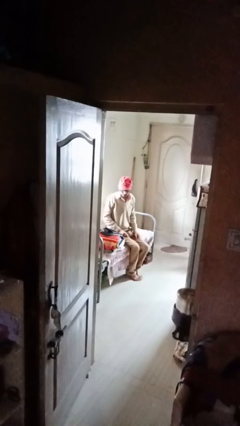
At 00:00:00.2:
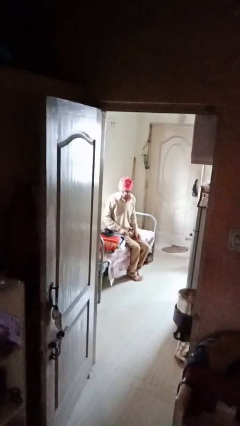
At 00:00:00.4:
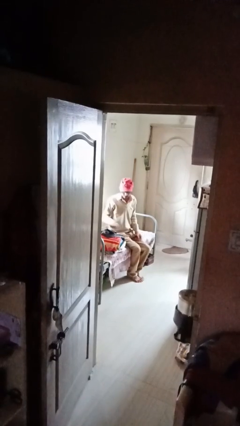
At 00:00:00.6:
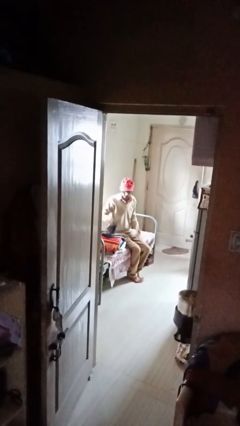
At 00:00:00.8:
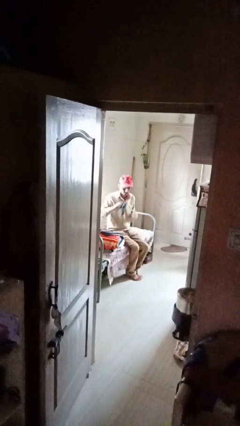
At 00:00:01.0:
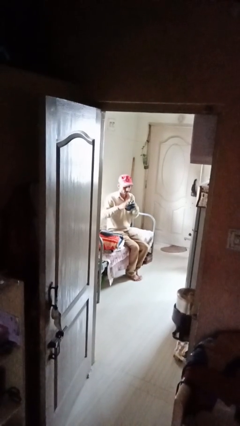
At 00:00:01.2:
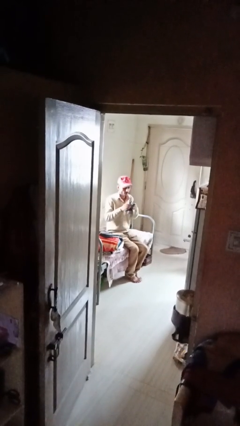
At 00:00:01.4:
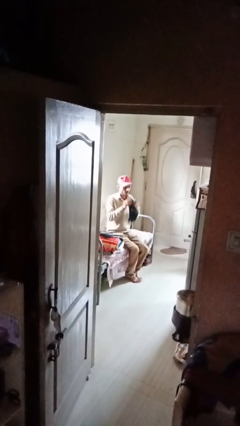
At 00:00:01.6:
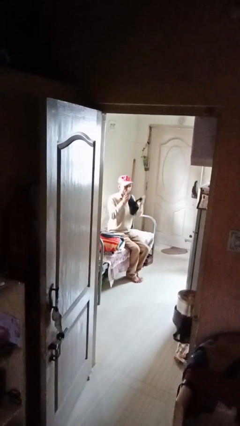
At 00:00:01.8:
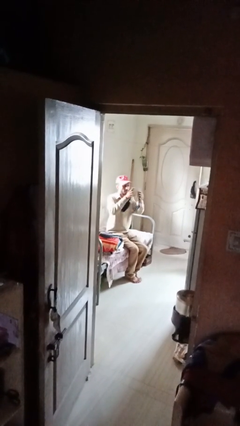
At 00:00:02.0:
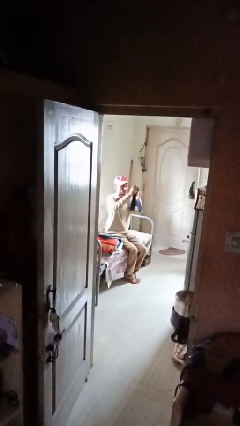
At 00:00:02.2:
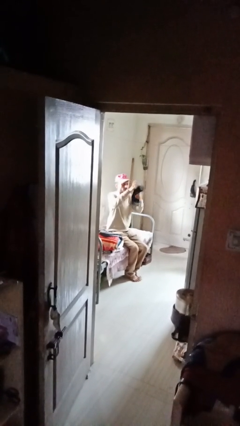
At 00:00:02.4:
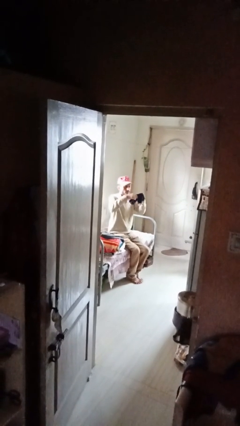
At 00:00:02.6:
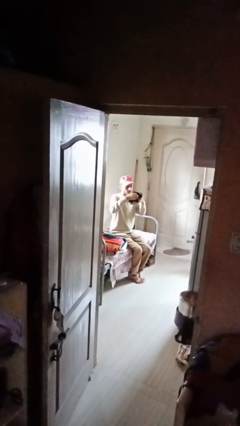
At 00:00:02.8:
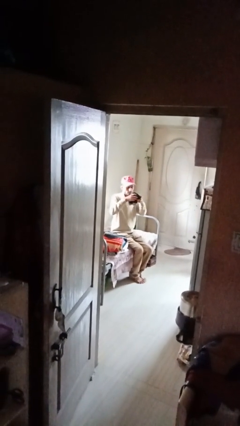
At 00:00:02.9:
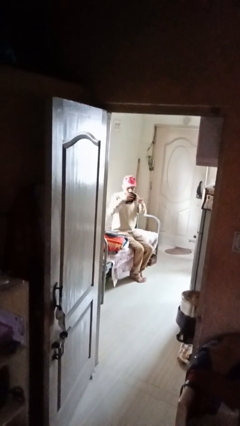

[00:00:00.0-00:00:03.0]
person folds socks

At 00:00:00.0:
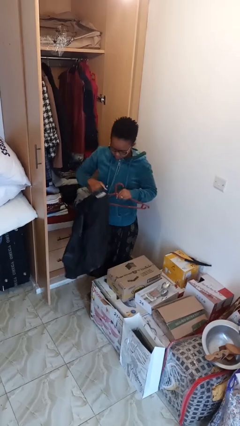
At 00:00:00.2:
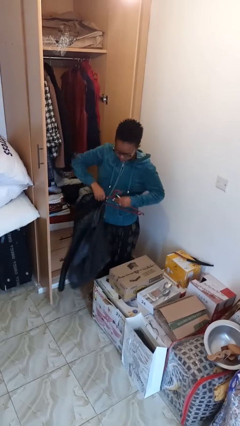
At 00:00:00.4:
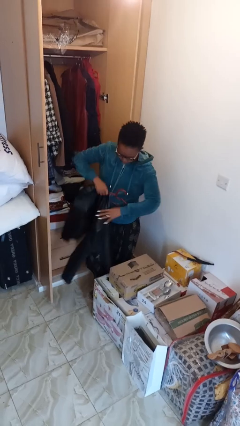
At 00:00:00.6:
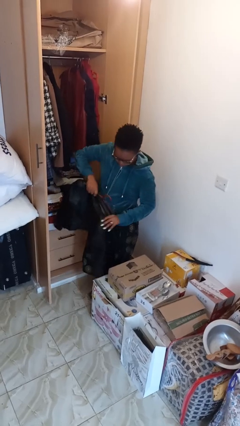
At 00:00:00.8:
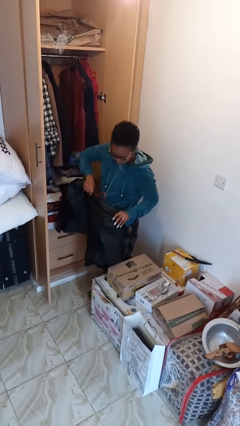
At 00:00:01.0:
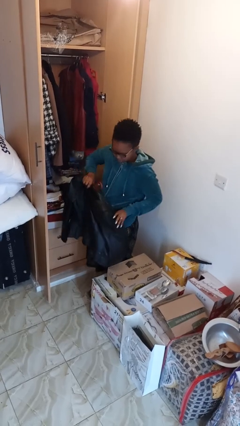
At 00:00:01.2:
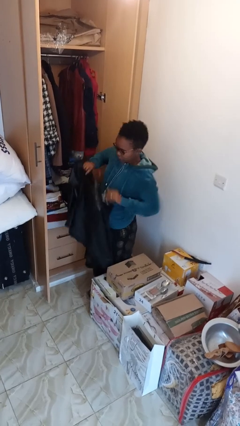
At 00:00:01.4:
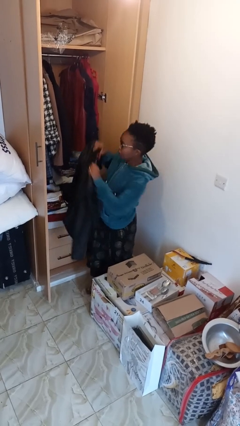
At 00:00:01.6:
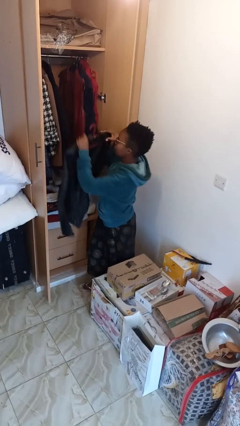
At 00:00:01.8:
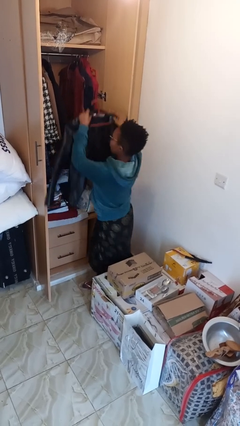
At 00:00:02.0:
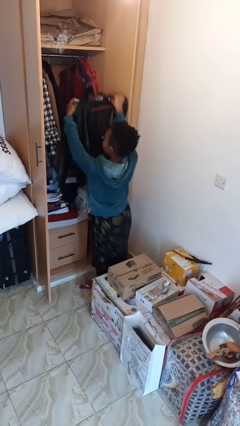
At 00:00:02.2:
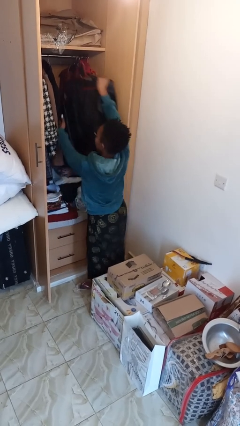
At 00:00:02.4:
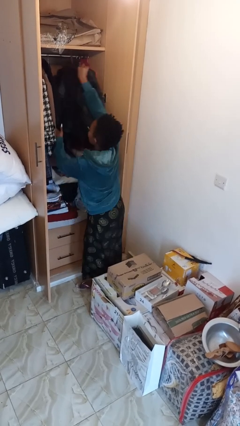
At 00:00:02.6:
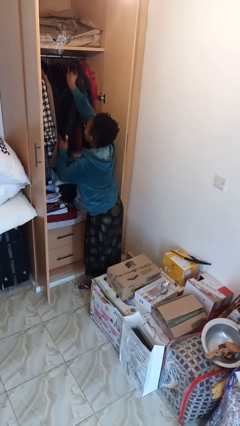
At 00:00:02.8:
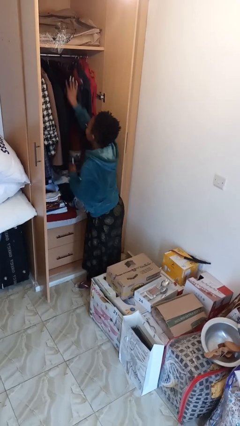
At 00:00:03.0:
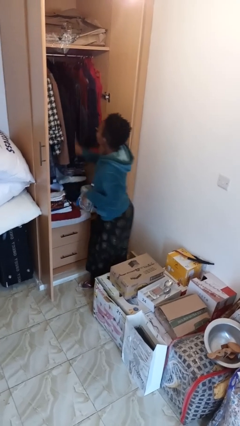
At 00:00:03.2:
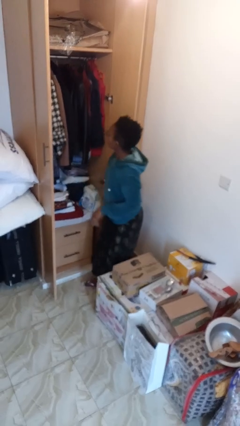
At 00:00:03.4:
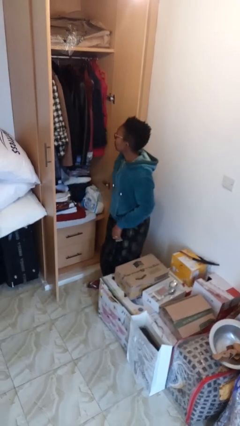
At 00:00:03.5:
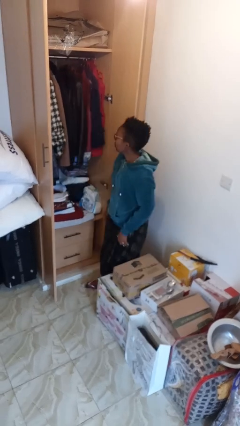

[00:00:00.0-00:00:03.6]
person puts clothes into closet

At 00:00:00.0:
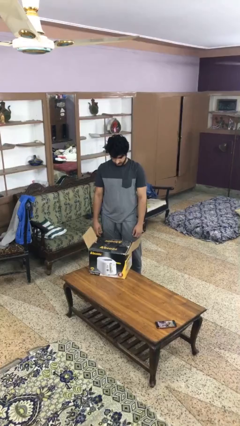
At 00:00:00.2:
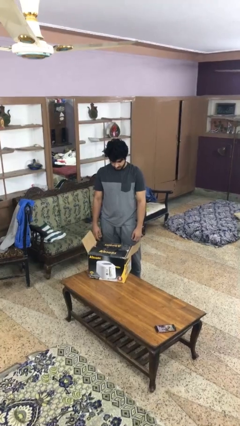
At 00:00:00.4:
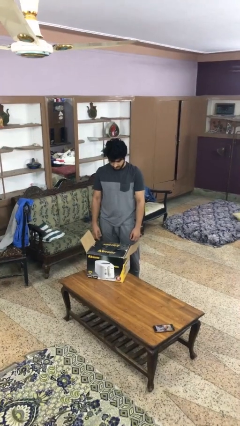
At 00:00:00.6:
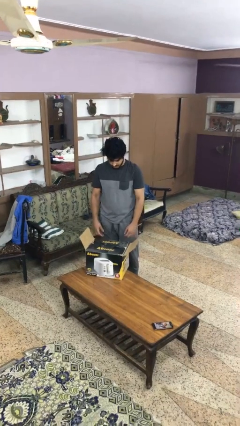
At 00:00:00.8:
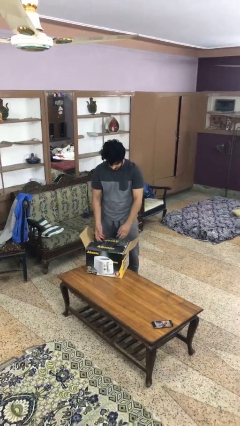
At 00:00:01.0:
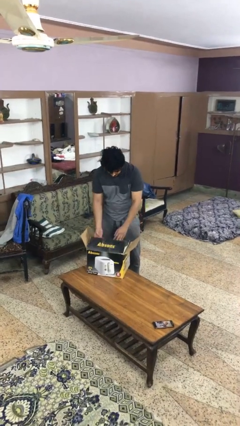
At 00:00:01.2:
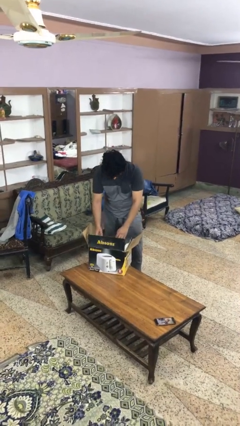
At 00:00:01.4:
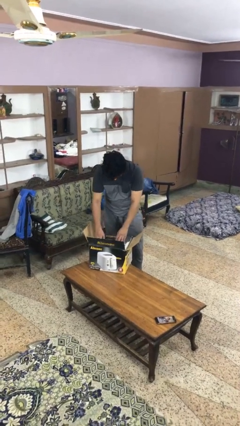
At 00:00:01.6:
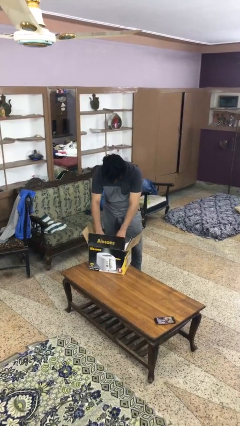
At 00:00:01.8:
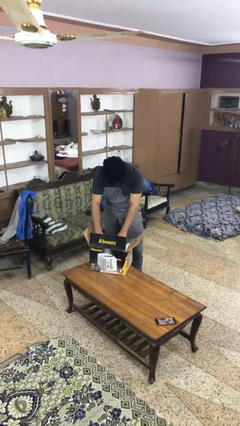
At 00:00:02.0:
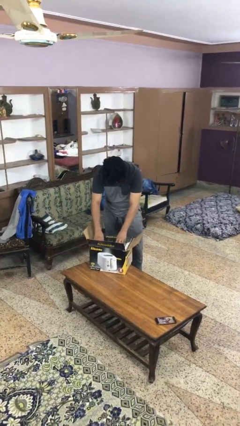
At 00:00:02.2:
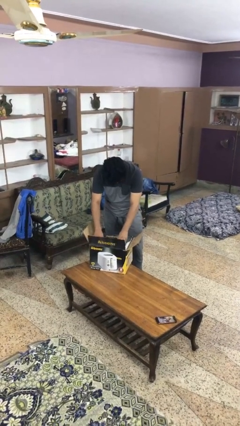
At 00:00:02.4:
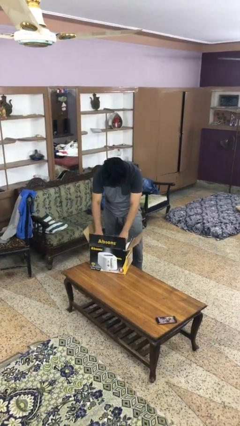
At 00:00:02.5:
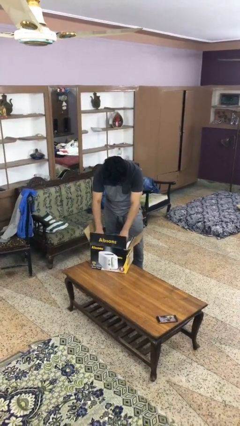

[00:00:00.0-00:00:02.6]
person searches in box

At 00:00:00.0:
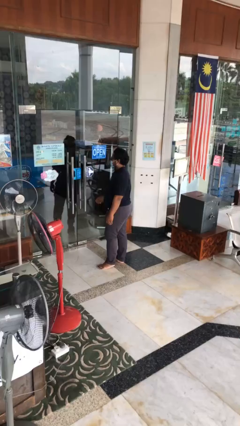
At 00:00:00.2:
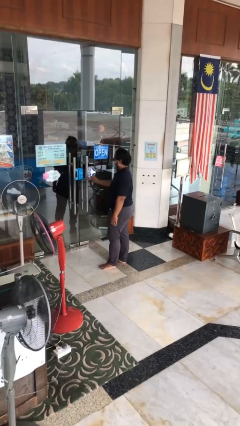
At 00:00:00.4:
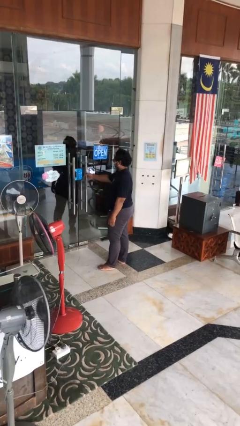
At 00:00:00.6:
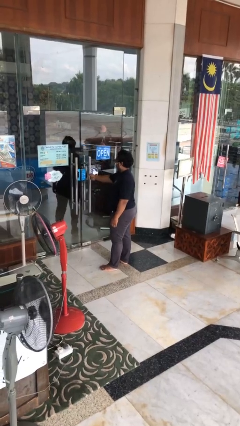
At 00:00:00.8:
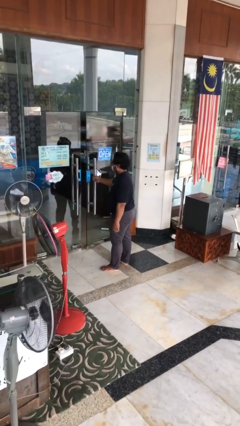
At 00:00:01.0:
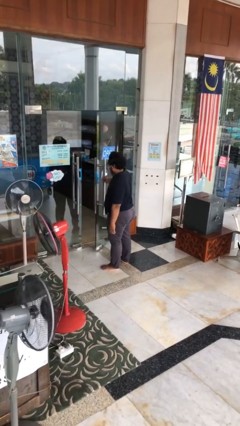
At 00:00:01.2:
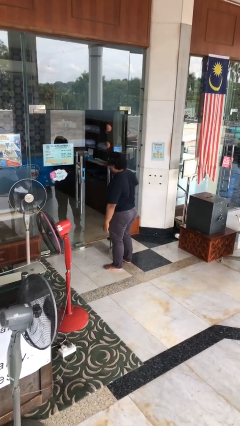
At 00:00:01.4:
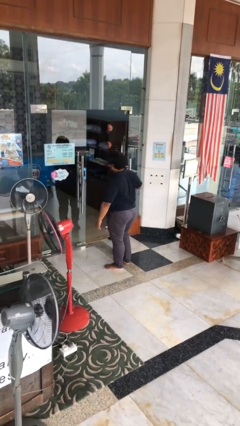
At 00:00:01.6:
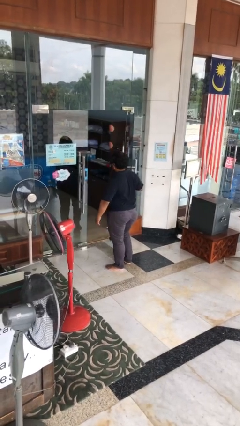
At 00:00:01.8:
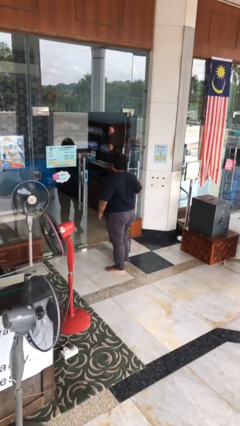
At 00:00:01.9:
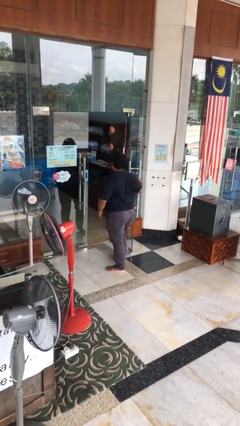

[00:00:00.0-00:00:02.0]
person opens facility door

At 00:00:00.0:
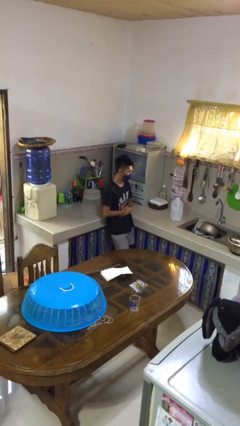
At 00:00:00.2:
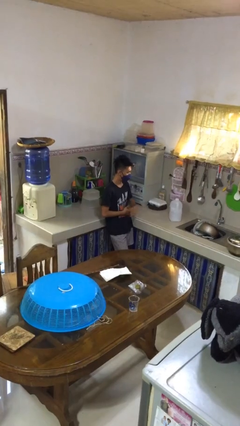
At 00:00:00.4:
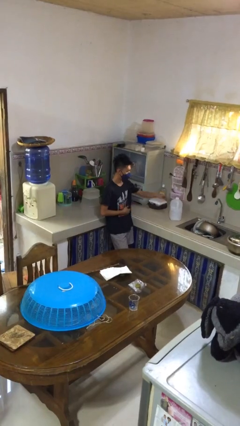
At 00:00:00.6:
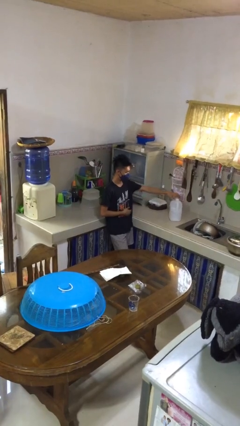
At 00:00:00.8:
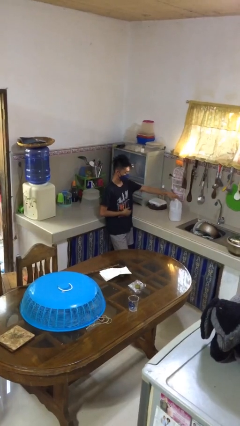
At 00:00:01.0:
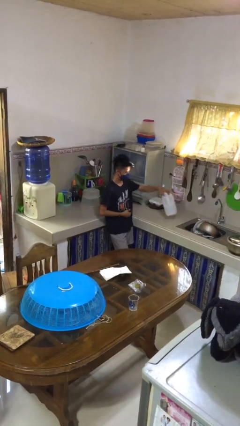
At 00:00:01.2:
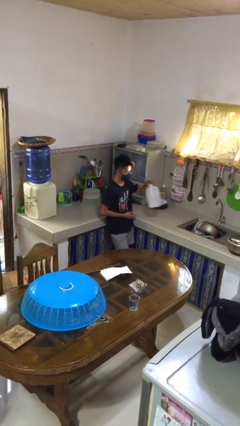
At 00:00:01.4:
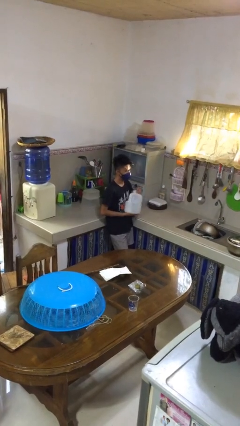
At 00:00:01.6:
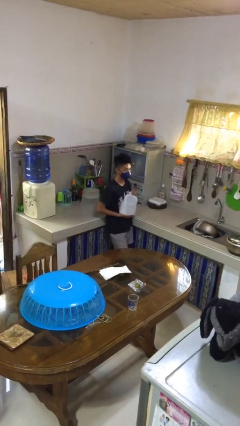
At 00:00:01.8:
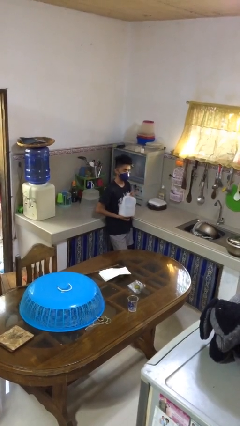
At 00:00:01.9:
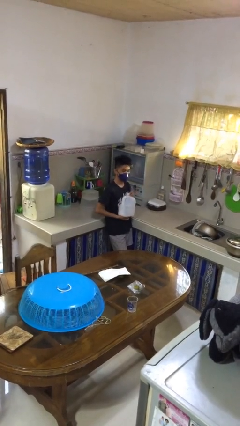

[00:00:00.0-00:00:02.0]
person puts down object on countertop

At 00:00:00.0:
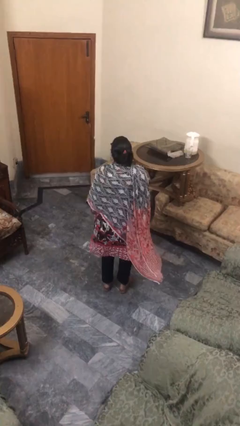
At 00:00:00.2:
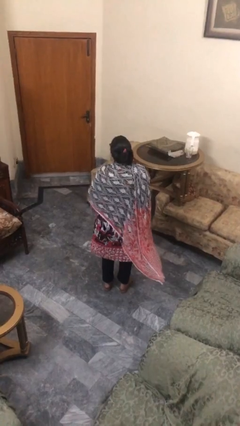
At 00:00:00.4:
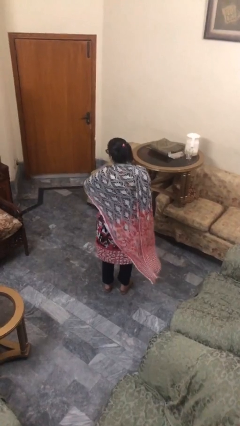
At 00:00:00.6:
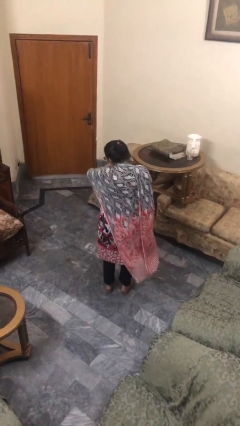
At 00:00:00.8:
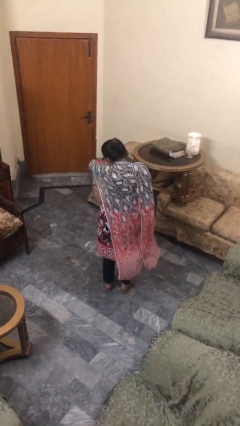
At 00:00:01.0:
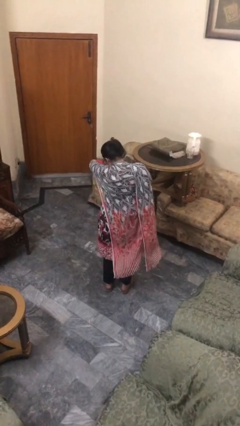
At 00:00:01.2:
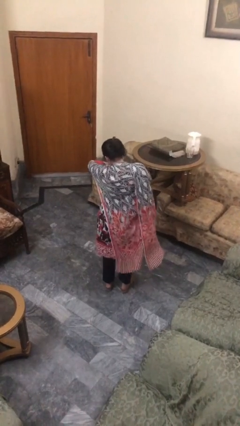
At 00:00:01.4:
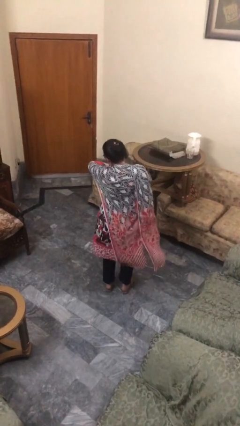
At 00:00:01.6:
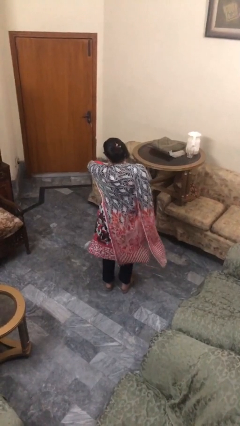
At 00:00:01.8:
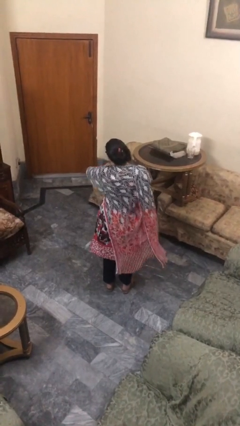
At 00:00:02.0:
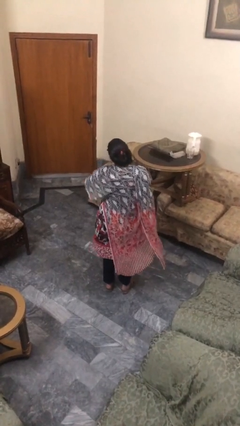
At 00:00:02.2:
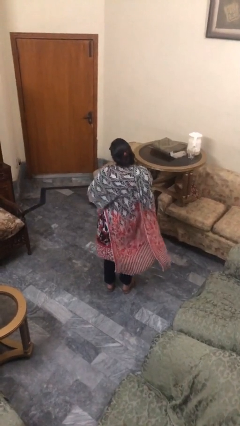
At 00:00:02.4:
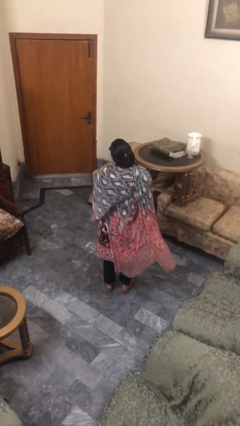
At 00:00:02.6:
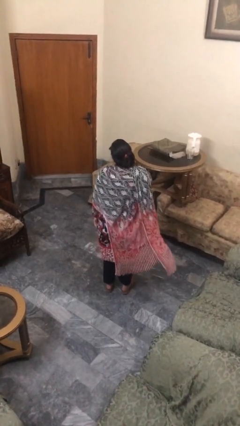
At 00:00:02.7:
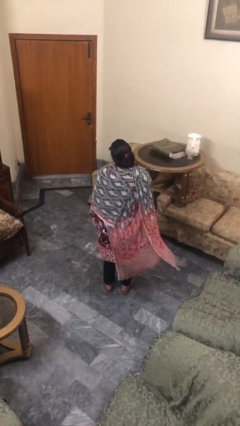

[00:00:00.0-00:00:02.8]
person sneezes into arm

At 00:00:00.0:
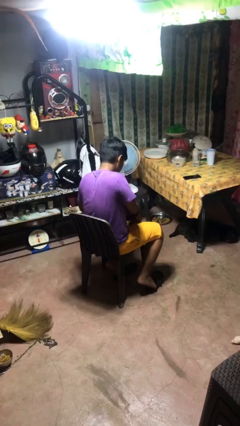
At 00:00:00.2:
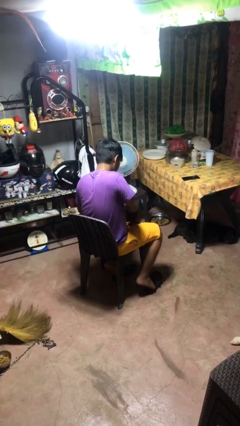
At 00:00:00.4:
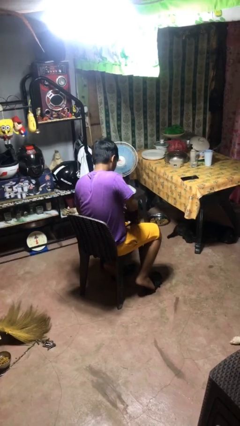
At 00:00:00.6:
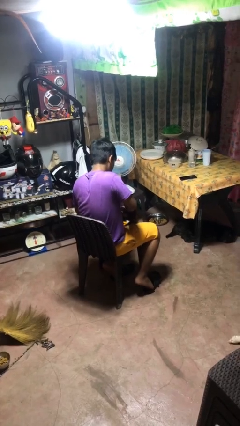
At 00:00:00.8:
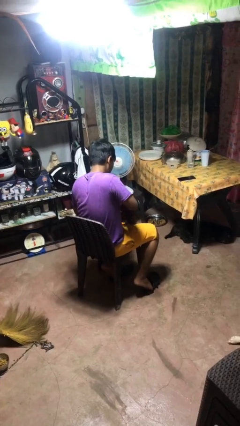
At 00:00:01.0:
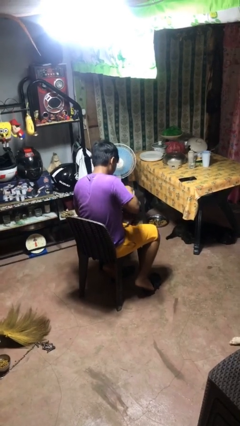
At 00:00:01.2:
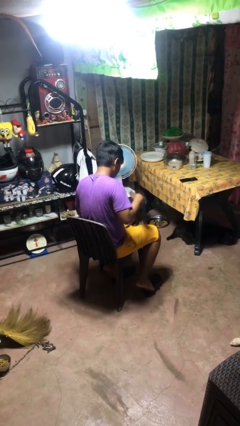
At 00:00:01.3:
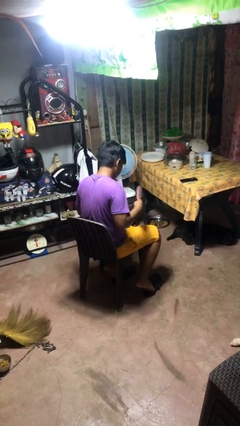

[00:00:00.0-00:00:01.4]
person takes object from purse
